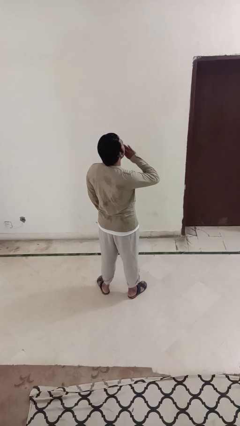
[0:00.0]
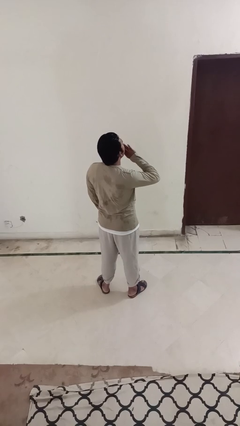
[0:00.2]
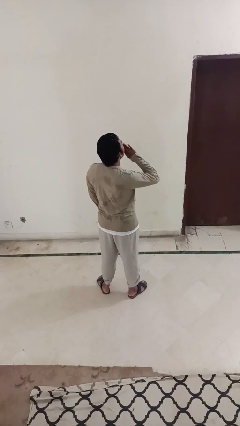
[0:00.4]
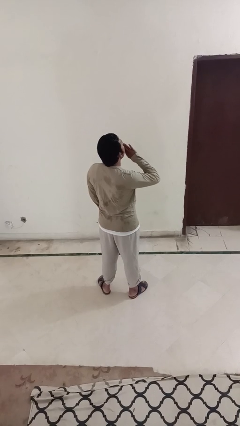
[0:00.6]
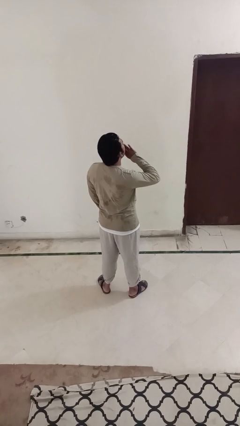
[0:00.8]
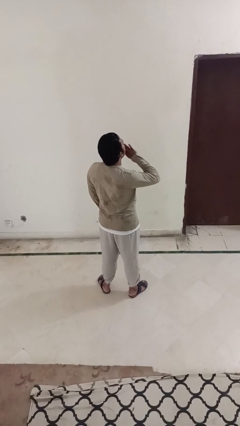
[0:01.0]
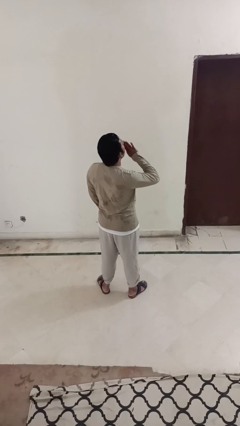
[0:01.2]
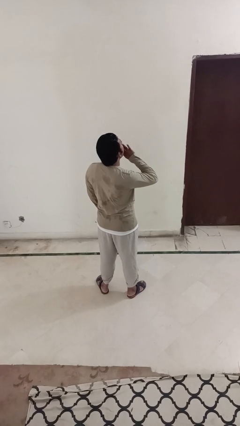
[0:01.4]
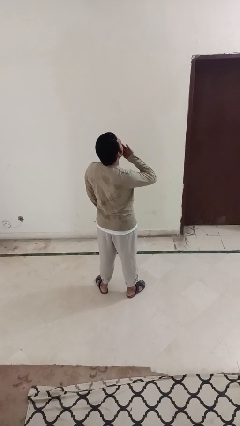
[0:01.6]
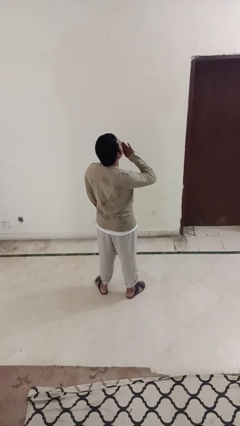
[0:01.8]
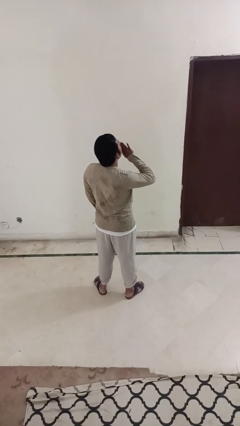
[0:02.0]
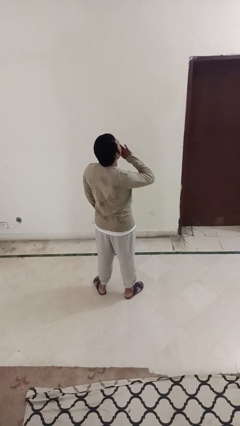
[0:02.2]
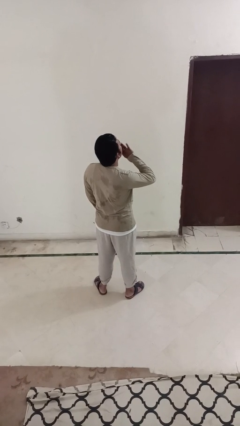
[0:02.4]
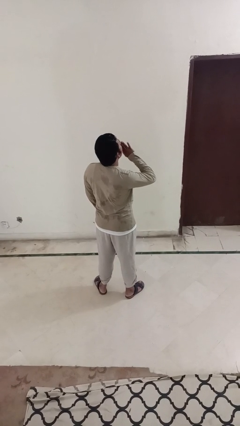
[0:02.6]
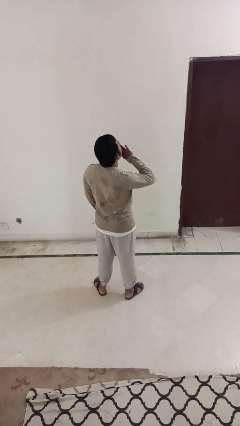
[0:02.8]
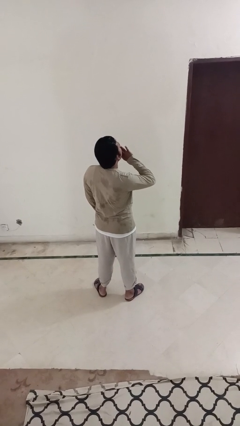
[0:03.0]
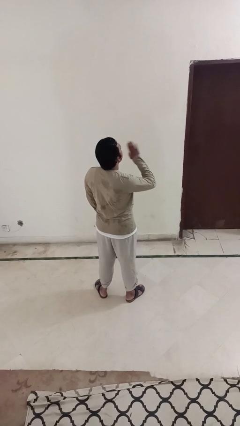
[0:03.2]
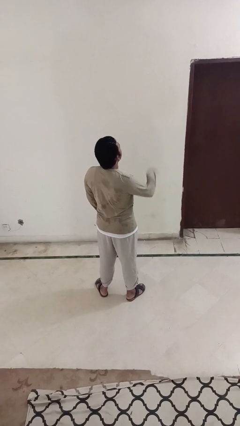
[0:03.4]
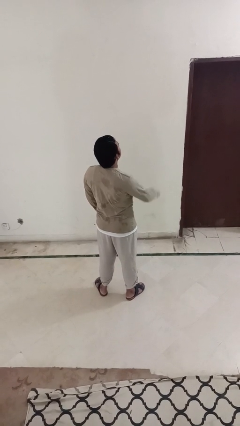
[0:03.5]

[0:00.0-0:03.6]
person yawns

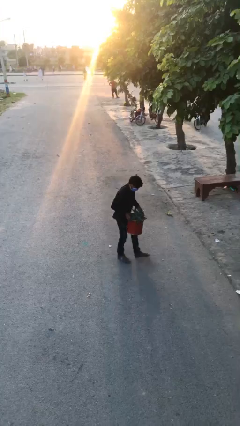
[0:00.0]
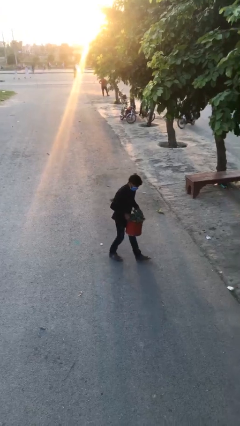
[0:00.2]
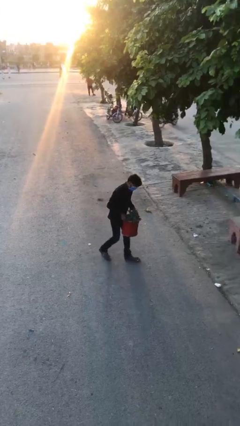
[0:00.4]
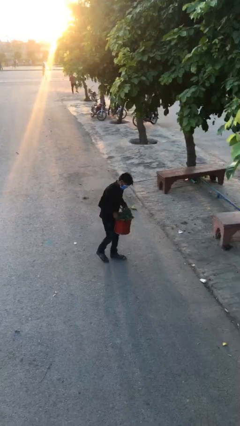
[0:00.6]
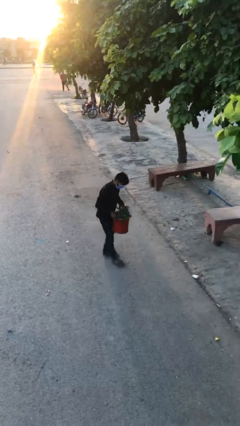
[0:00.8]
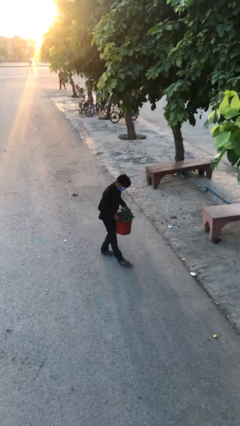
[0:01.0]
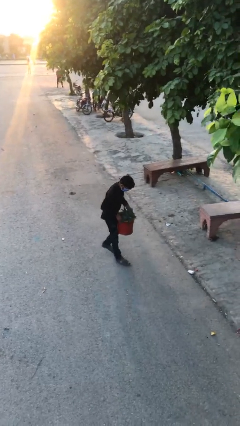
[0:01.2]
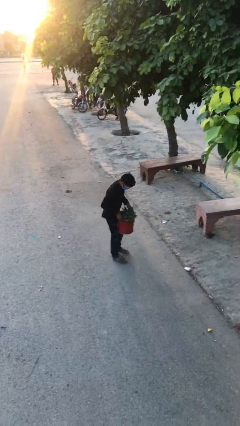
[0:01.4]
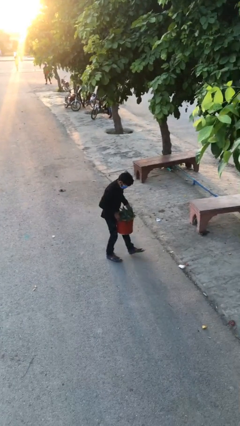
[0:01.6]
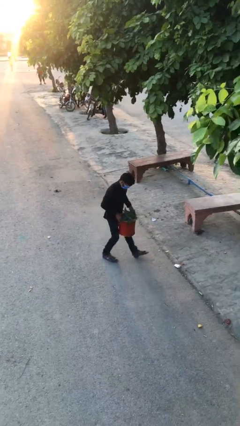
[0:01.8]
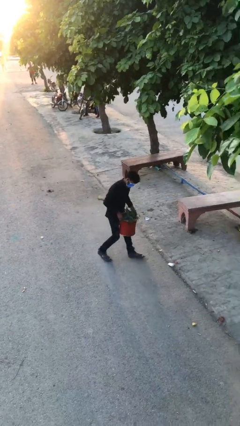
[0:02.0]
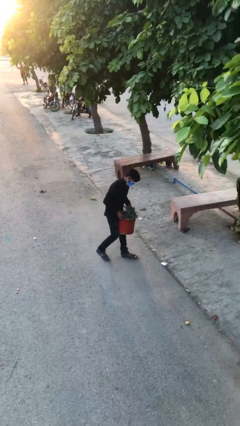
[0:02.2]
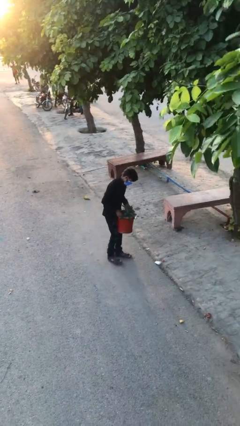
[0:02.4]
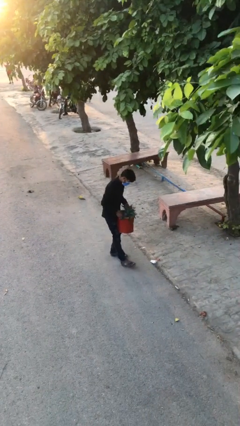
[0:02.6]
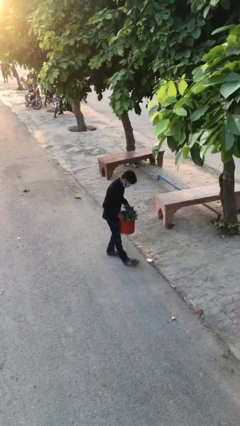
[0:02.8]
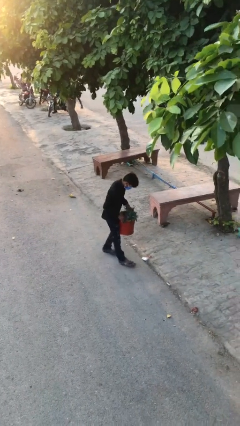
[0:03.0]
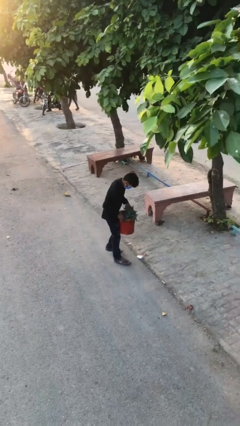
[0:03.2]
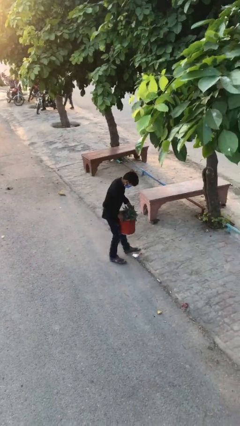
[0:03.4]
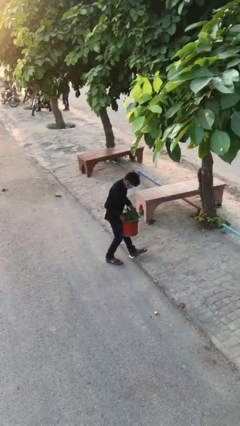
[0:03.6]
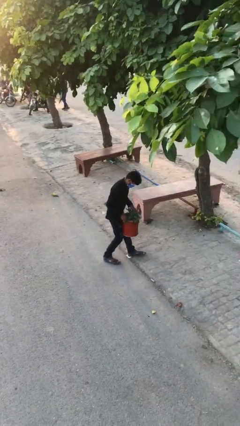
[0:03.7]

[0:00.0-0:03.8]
person carries heavy object

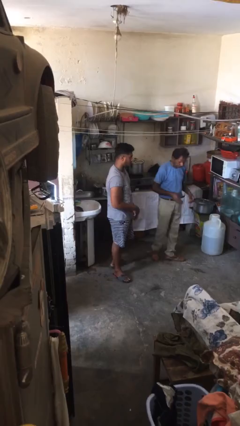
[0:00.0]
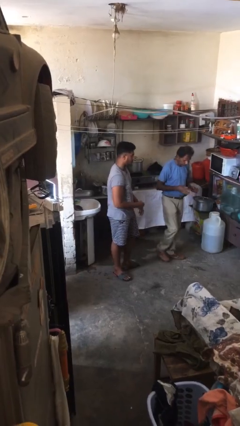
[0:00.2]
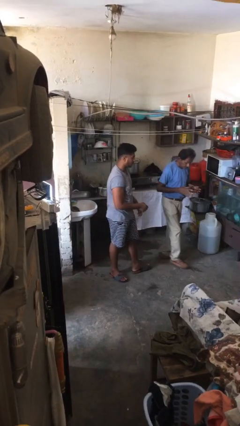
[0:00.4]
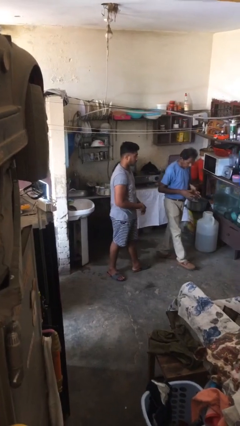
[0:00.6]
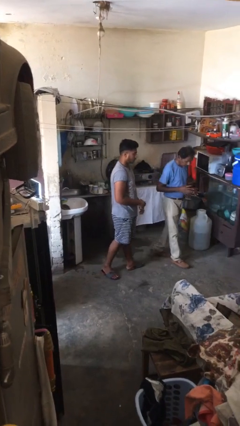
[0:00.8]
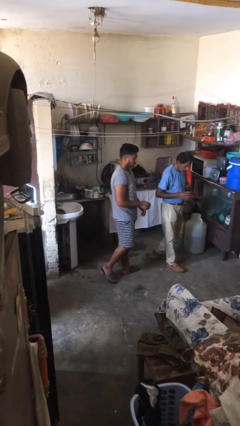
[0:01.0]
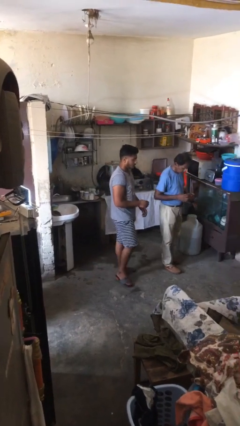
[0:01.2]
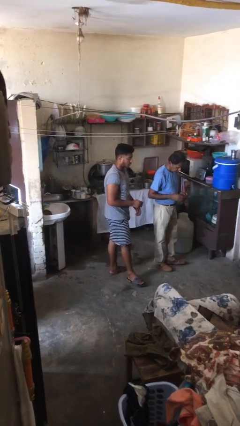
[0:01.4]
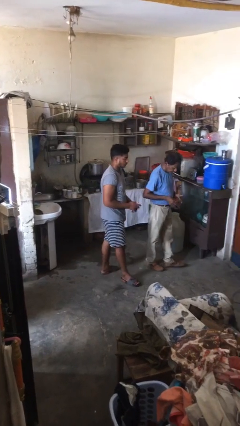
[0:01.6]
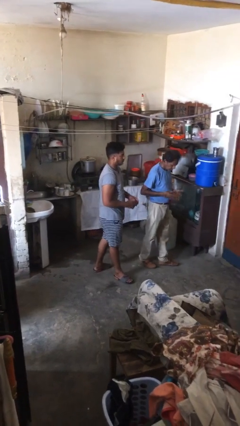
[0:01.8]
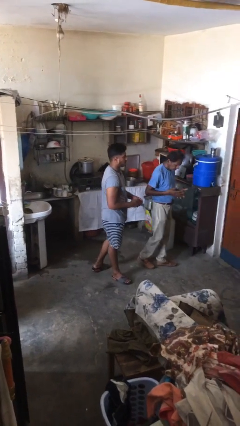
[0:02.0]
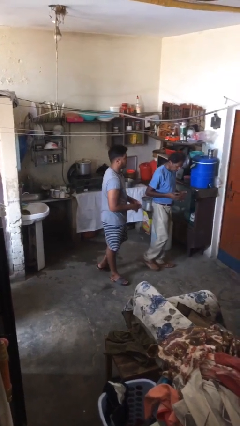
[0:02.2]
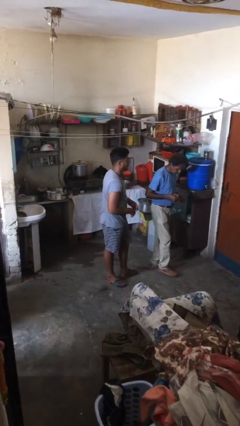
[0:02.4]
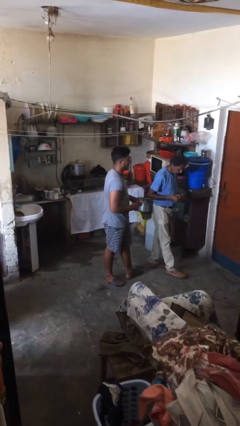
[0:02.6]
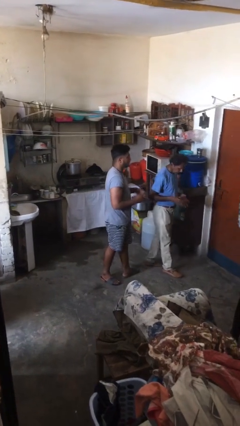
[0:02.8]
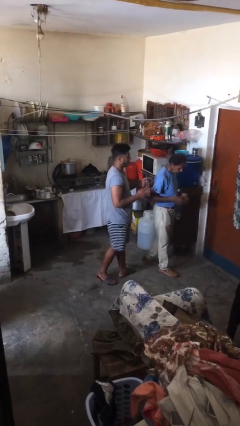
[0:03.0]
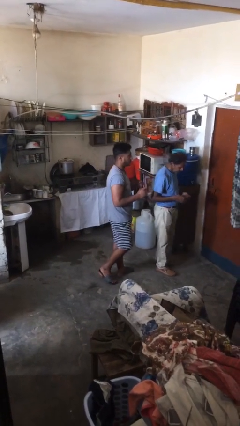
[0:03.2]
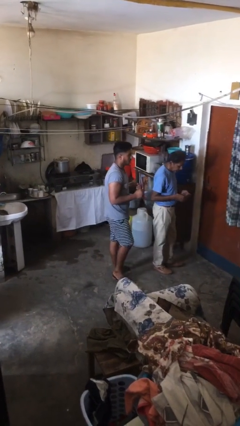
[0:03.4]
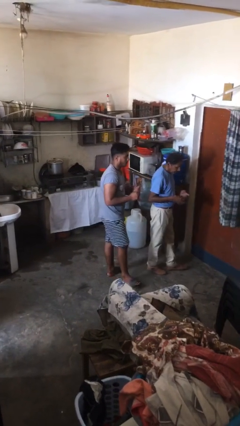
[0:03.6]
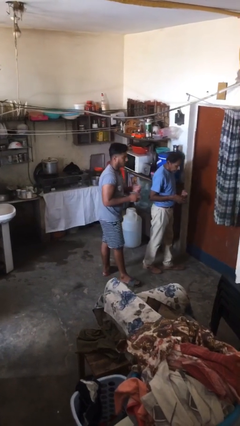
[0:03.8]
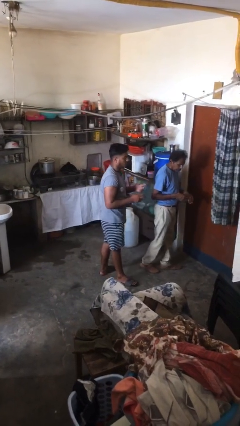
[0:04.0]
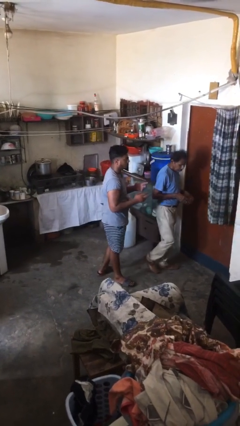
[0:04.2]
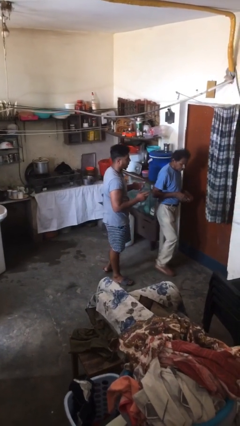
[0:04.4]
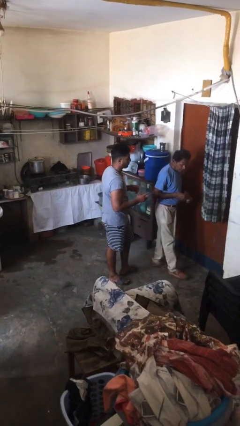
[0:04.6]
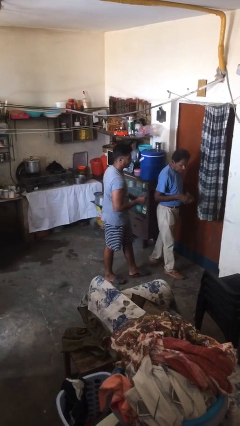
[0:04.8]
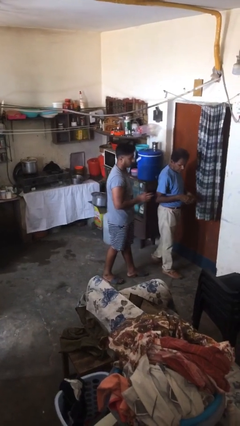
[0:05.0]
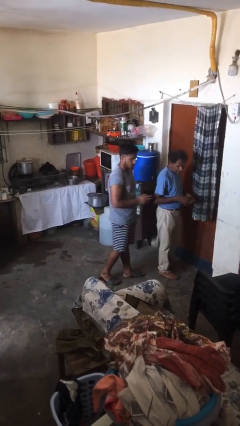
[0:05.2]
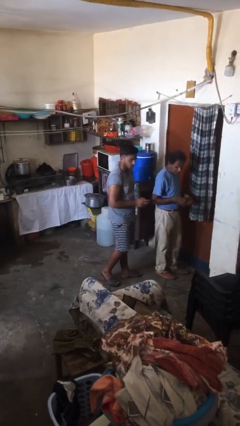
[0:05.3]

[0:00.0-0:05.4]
person talks to person

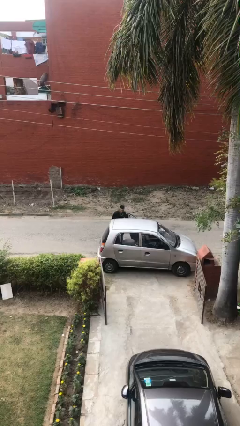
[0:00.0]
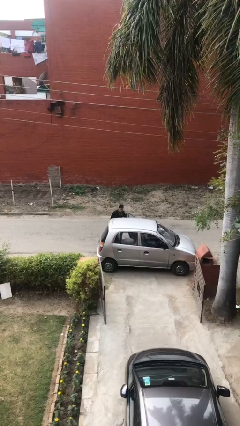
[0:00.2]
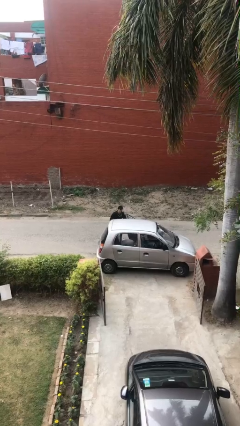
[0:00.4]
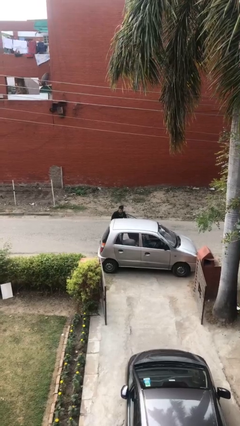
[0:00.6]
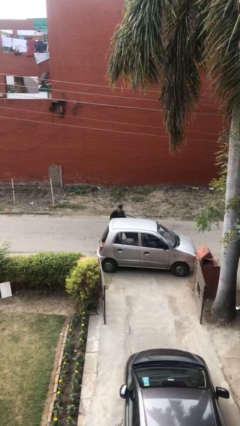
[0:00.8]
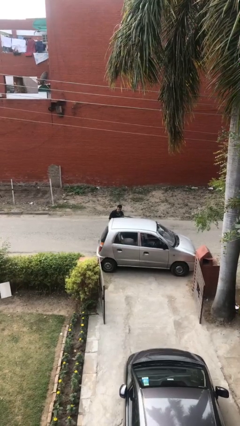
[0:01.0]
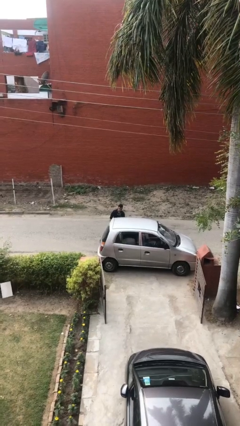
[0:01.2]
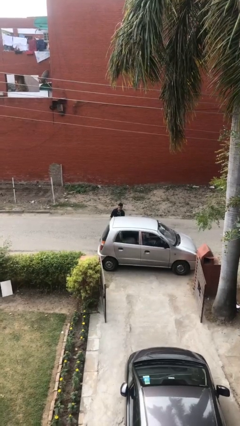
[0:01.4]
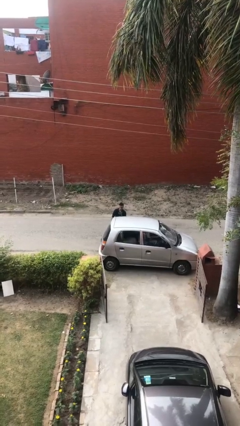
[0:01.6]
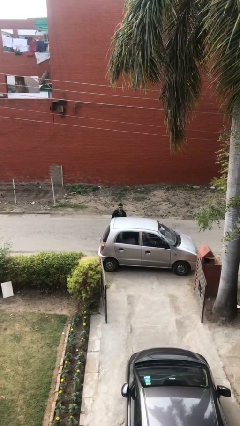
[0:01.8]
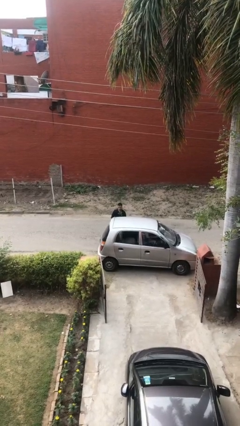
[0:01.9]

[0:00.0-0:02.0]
person closes car door

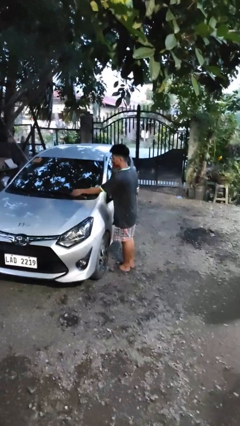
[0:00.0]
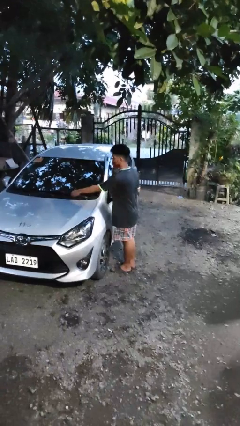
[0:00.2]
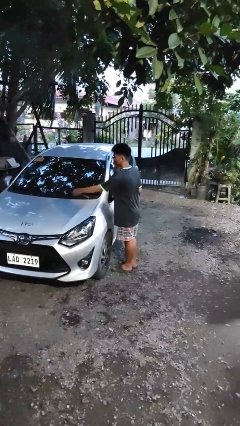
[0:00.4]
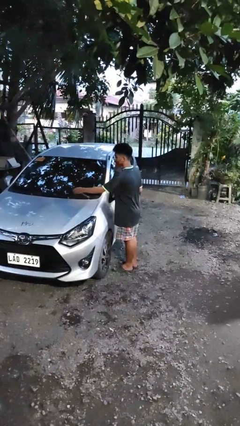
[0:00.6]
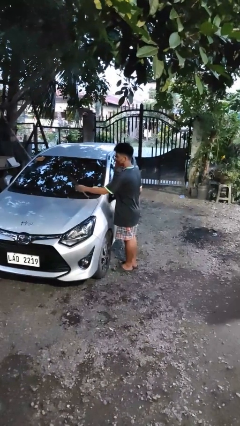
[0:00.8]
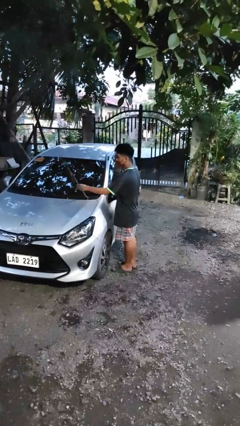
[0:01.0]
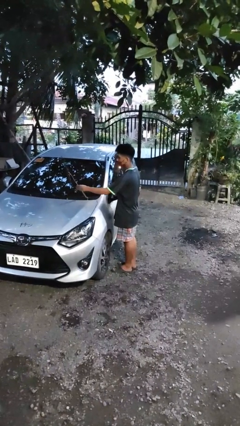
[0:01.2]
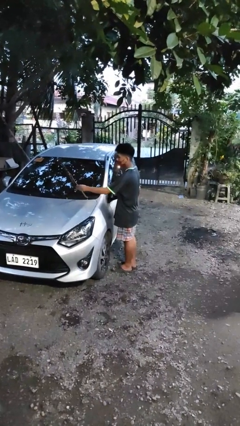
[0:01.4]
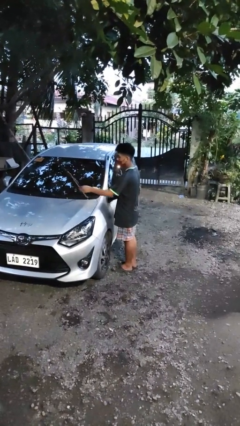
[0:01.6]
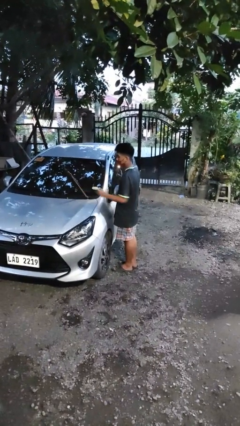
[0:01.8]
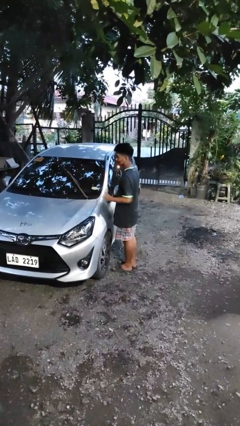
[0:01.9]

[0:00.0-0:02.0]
person flips up car wipers

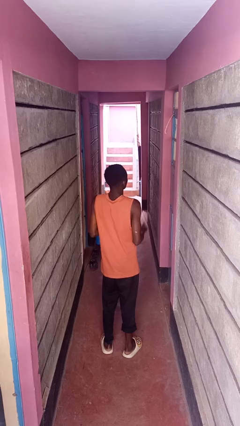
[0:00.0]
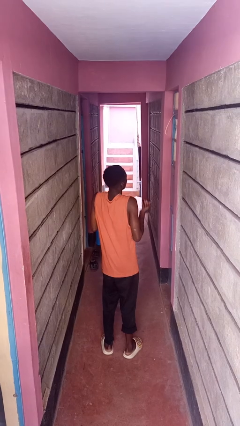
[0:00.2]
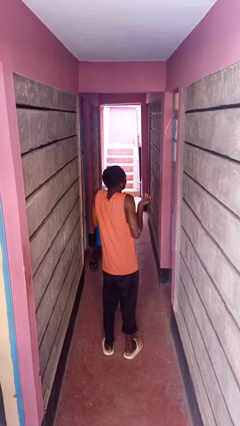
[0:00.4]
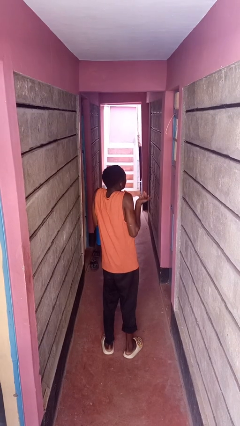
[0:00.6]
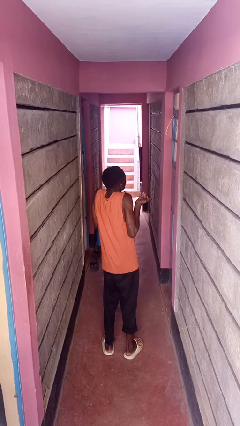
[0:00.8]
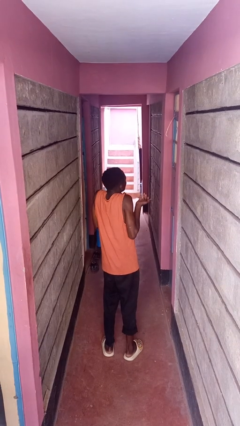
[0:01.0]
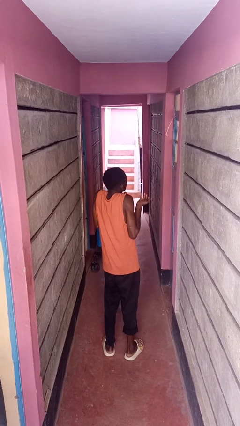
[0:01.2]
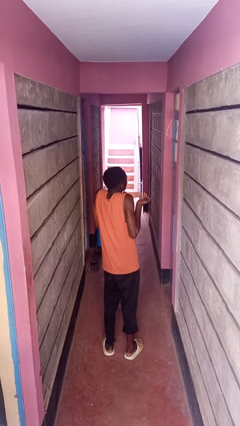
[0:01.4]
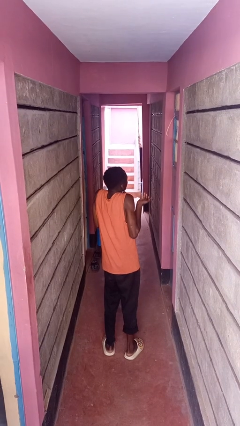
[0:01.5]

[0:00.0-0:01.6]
person shrugs
